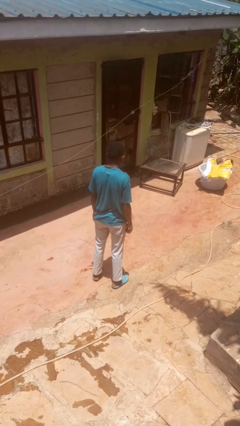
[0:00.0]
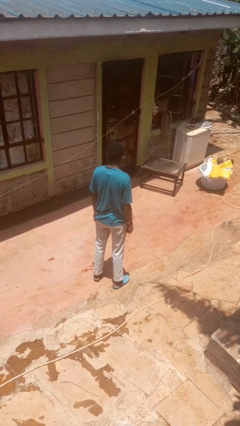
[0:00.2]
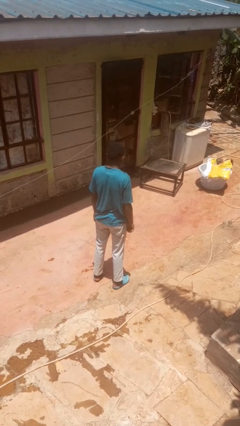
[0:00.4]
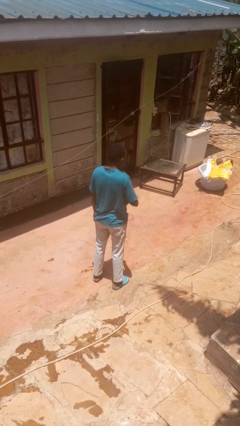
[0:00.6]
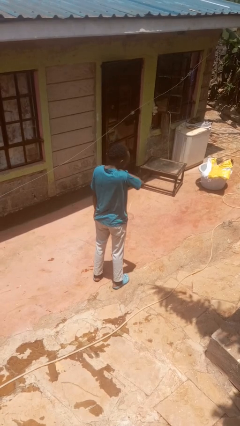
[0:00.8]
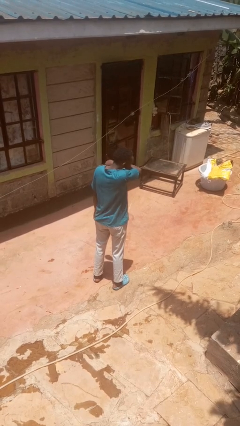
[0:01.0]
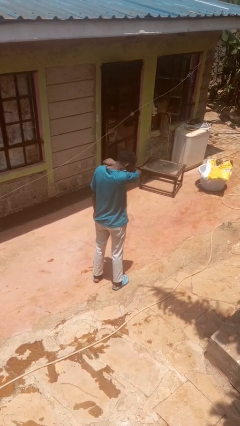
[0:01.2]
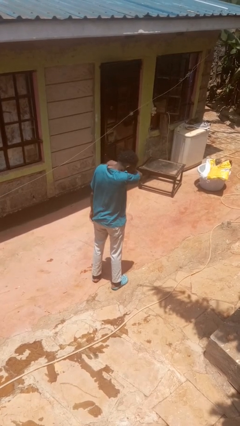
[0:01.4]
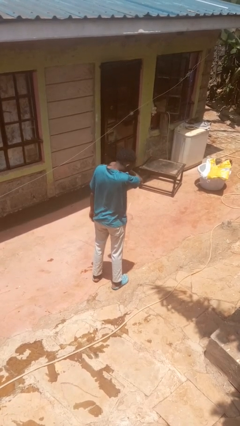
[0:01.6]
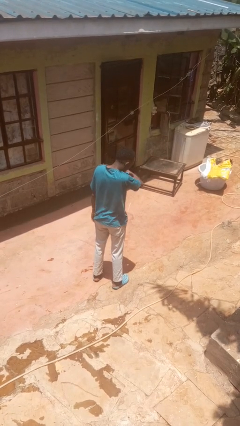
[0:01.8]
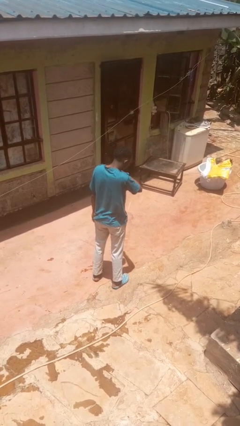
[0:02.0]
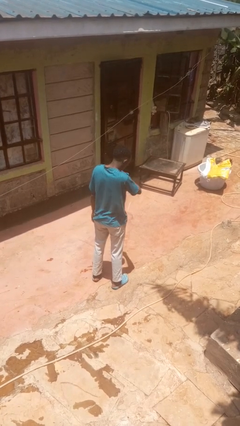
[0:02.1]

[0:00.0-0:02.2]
person sneezes into arm

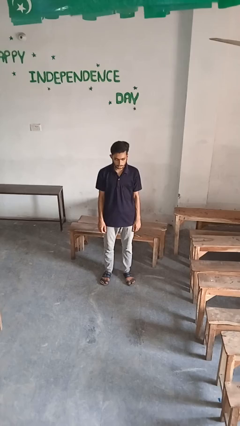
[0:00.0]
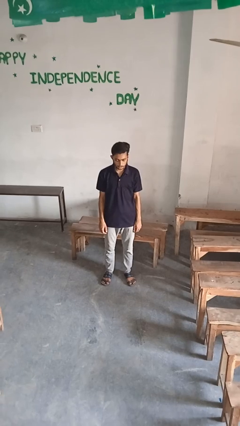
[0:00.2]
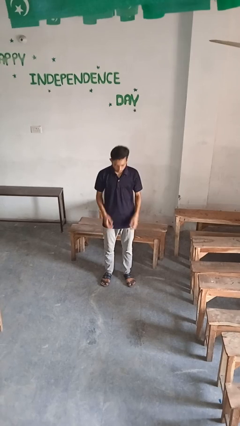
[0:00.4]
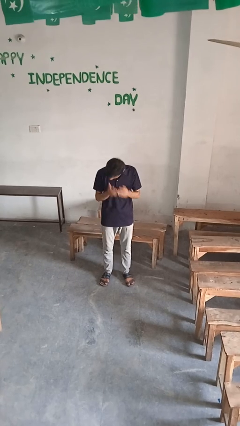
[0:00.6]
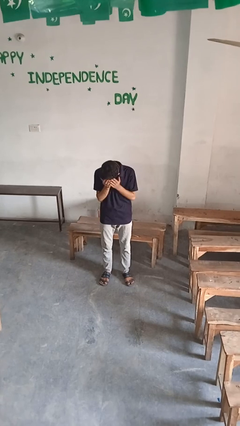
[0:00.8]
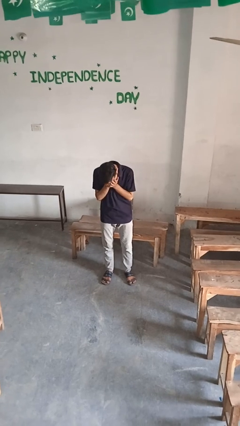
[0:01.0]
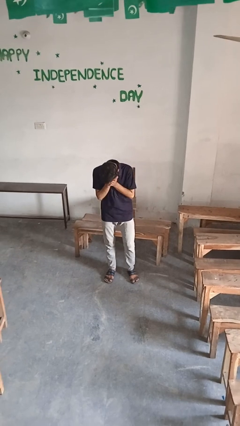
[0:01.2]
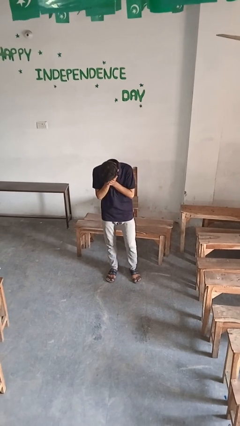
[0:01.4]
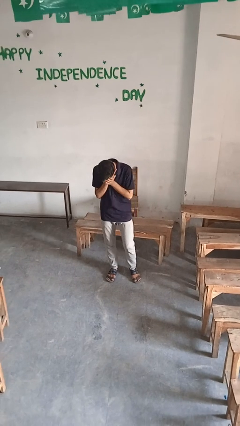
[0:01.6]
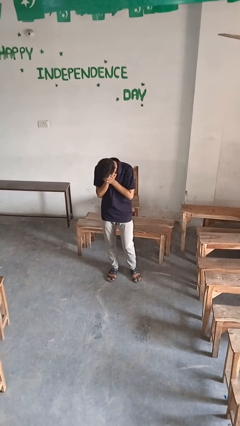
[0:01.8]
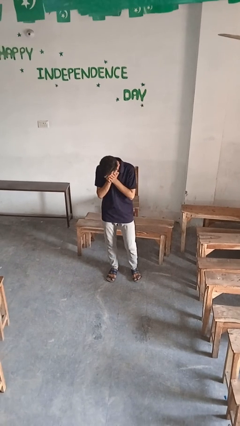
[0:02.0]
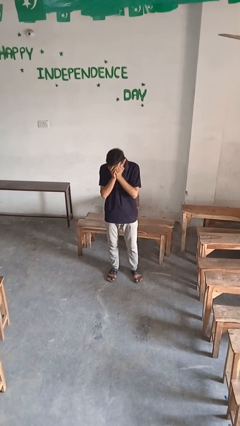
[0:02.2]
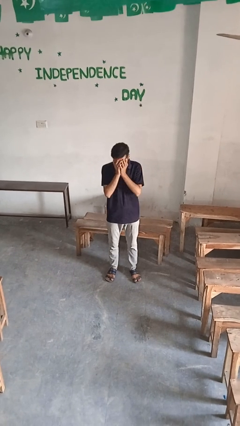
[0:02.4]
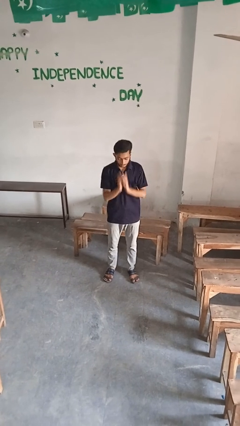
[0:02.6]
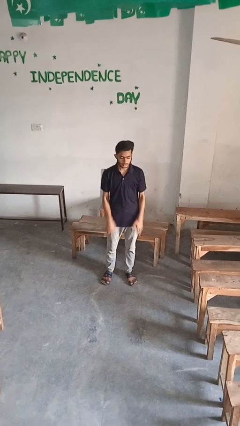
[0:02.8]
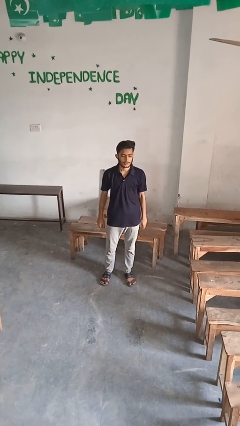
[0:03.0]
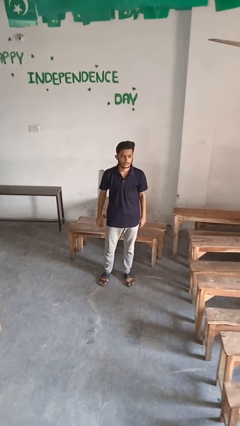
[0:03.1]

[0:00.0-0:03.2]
person covers face with hands

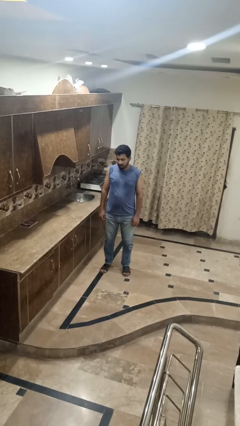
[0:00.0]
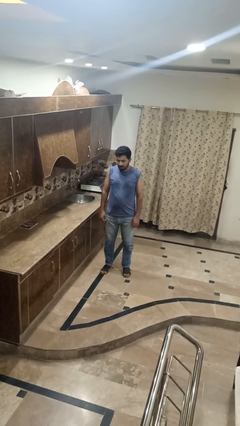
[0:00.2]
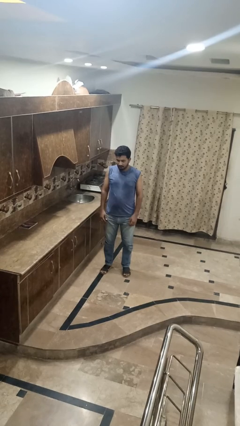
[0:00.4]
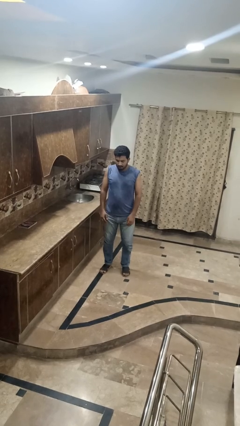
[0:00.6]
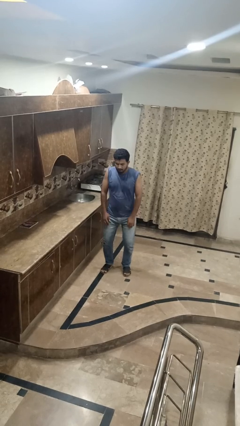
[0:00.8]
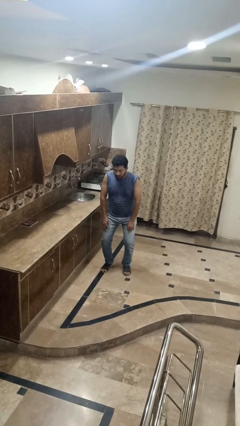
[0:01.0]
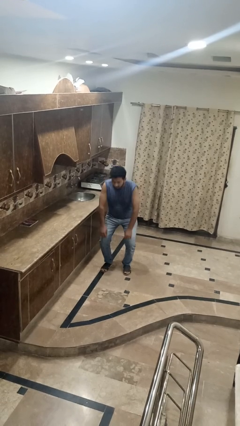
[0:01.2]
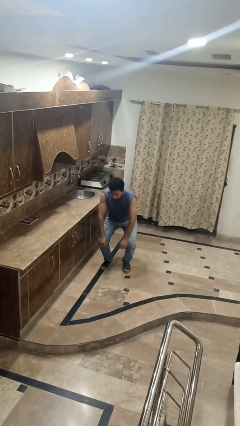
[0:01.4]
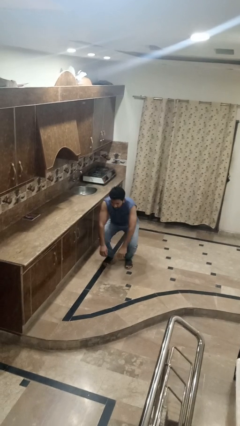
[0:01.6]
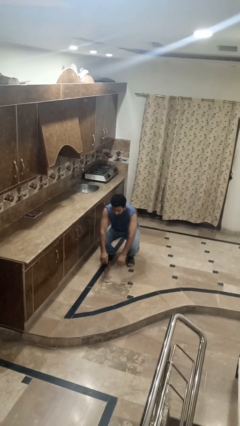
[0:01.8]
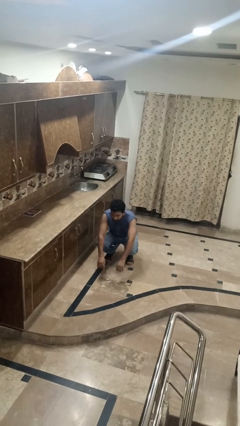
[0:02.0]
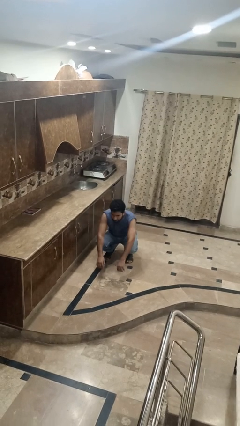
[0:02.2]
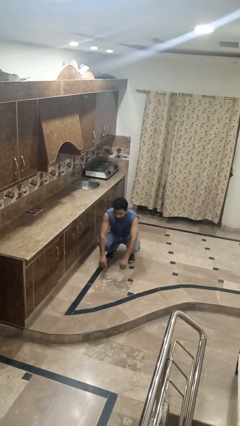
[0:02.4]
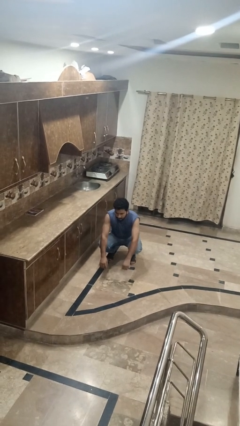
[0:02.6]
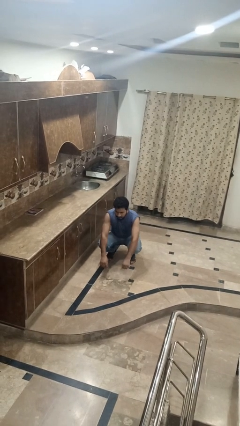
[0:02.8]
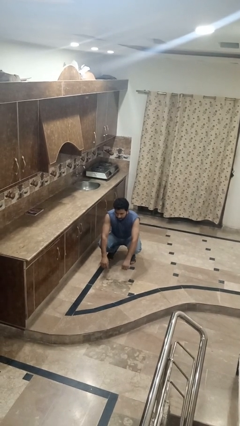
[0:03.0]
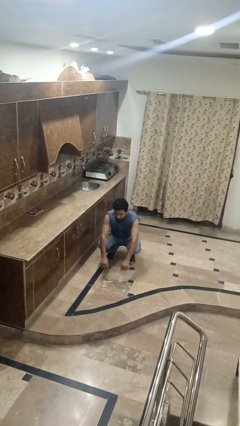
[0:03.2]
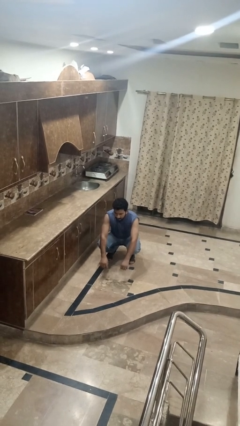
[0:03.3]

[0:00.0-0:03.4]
person squats

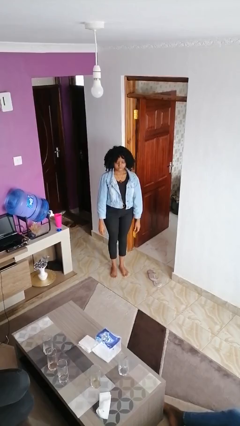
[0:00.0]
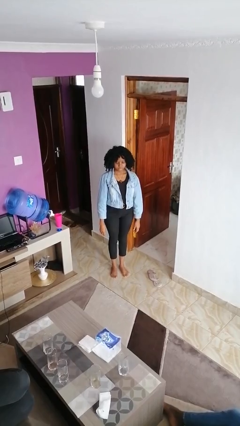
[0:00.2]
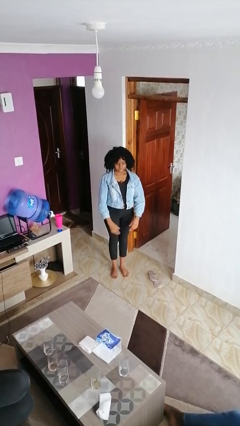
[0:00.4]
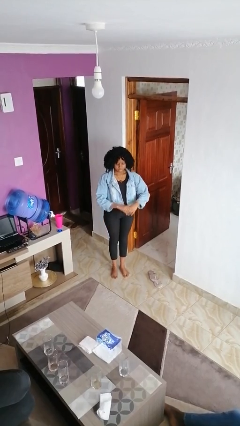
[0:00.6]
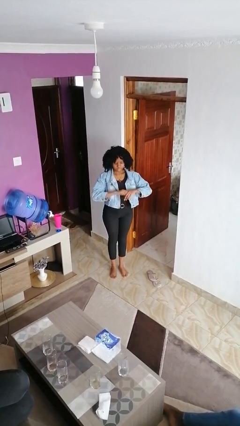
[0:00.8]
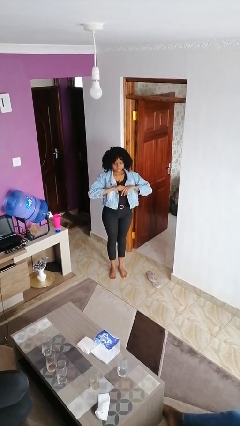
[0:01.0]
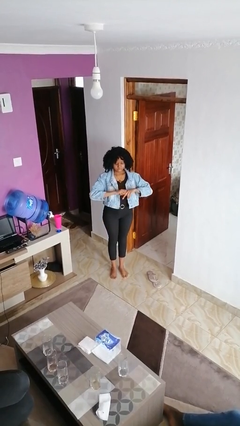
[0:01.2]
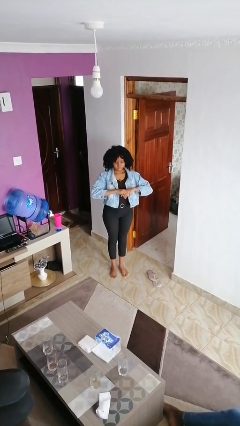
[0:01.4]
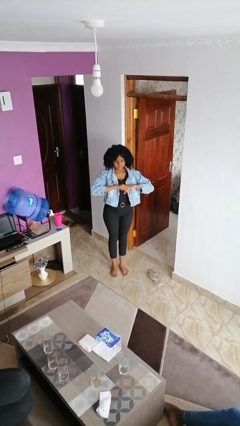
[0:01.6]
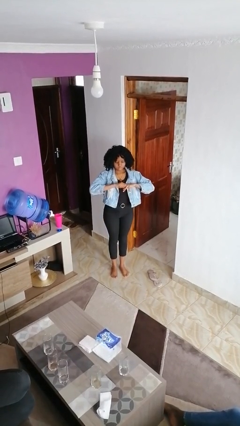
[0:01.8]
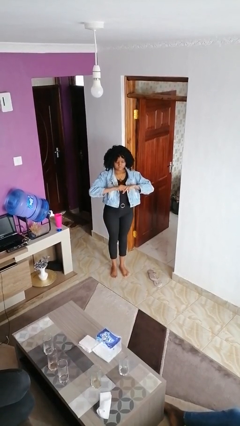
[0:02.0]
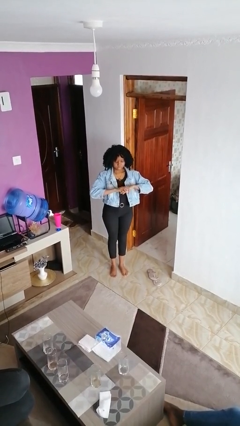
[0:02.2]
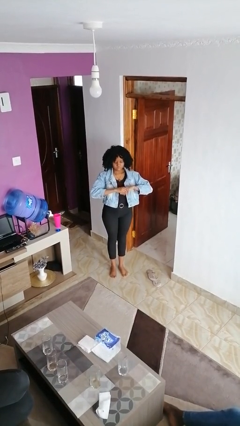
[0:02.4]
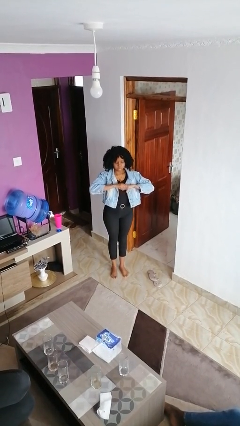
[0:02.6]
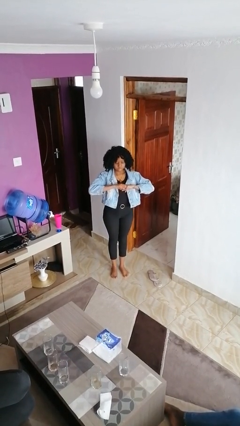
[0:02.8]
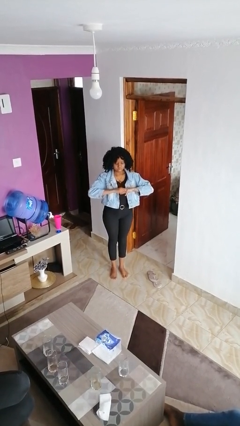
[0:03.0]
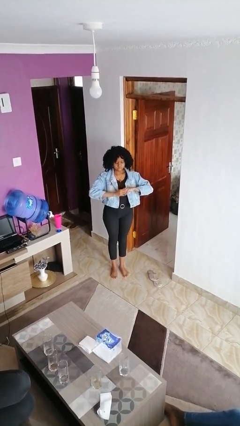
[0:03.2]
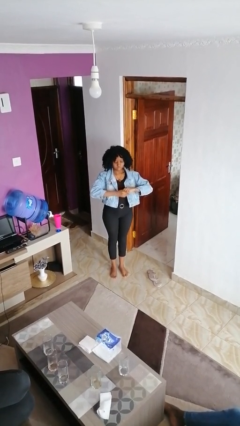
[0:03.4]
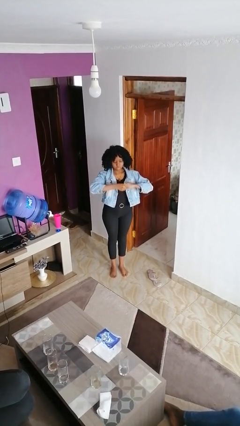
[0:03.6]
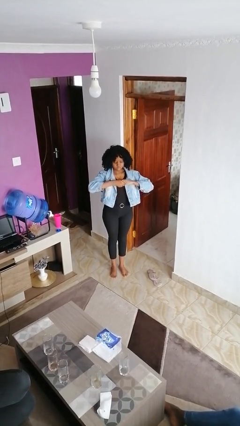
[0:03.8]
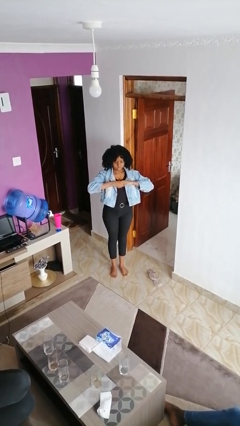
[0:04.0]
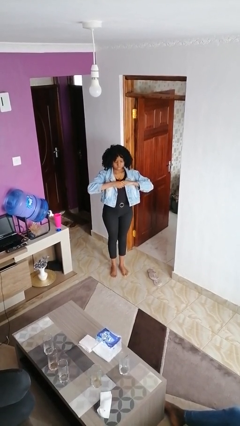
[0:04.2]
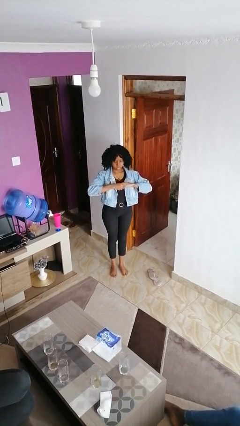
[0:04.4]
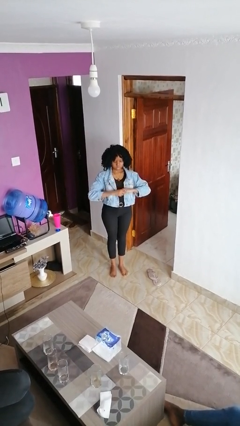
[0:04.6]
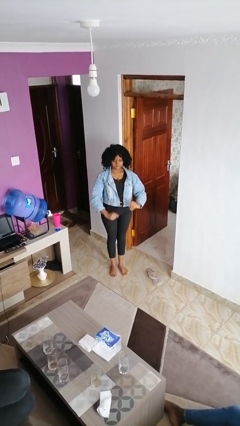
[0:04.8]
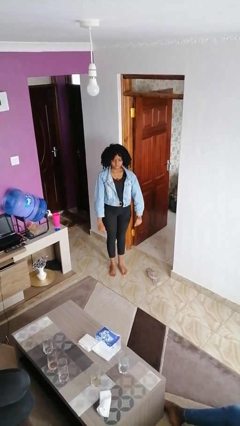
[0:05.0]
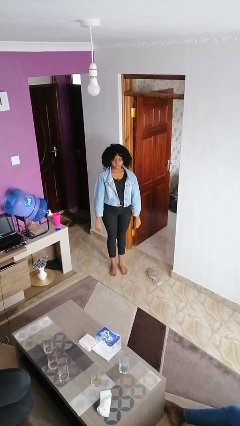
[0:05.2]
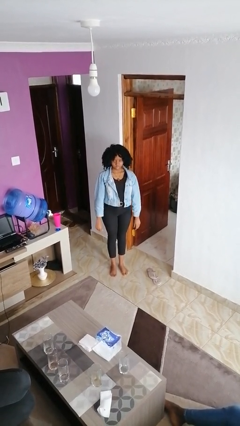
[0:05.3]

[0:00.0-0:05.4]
person cracks knuckles

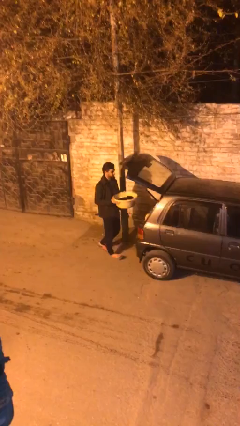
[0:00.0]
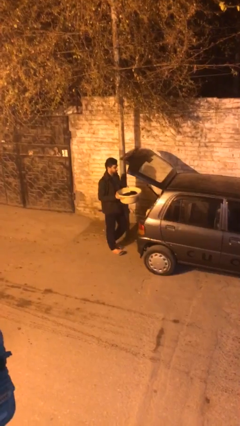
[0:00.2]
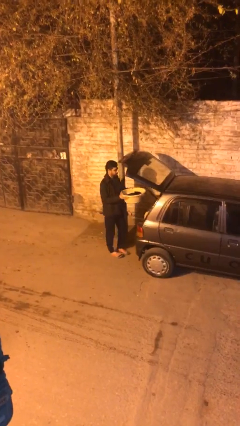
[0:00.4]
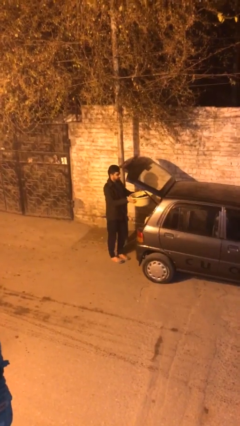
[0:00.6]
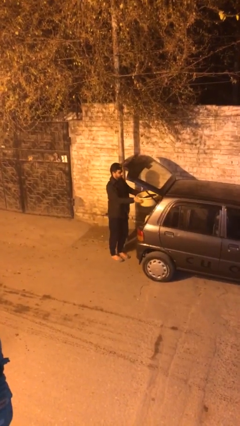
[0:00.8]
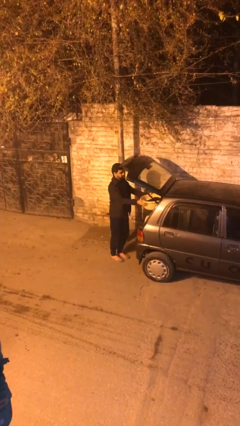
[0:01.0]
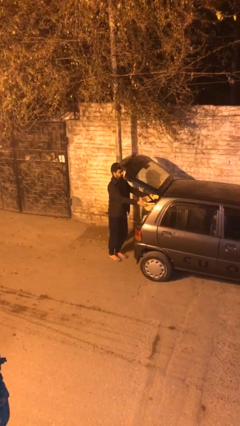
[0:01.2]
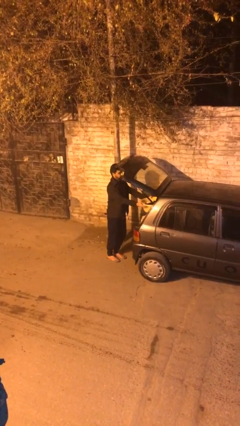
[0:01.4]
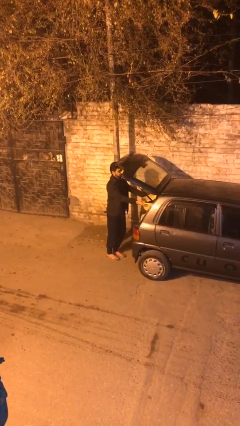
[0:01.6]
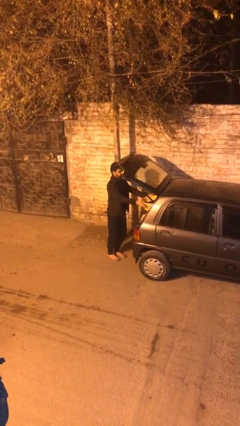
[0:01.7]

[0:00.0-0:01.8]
person loads car

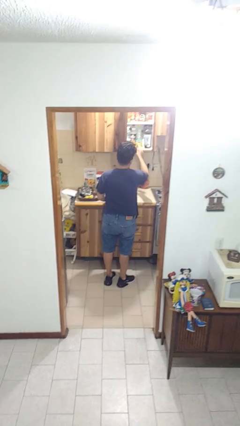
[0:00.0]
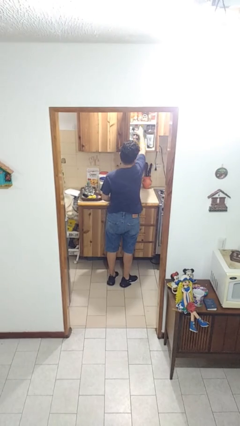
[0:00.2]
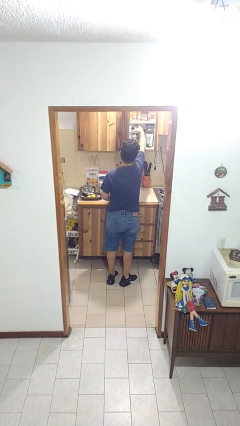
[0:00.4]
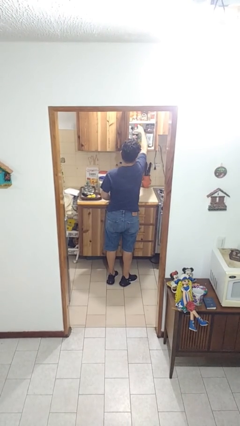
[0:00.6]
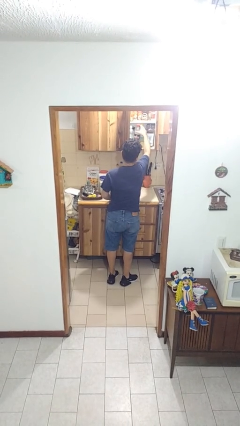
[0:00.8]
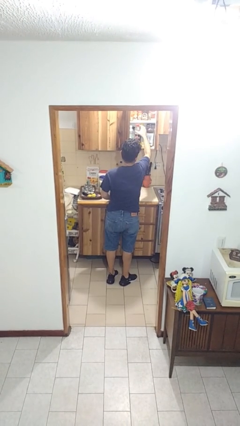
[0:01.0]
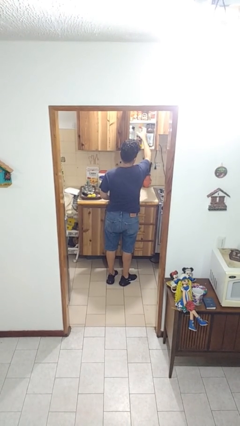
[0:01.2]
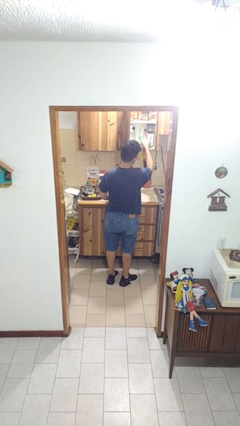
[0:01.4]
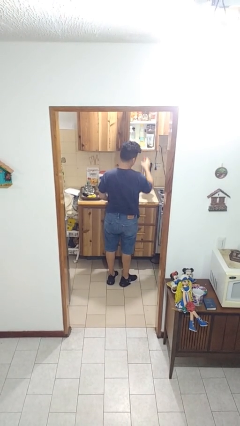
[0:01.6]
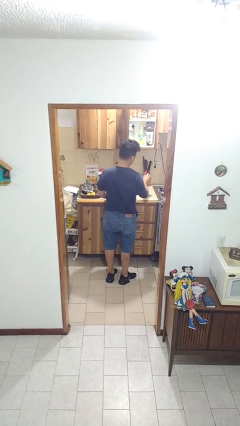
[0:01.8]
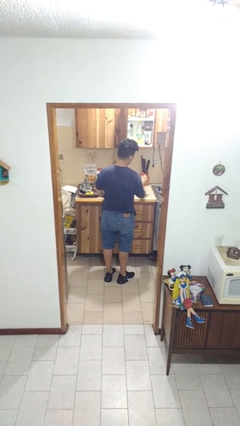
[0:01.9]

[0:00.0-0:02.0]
person takes object from cabinet
